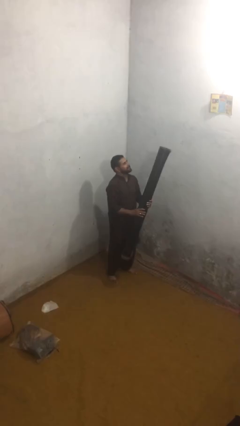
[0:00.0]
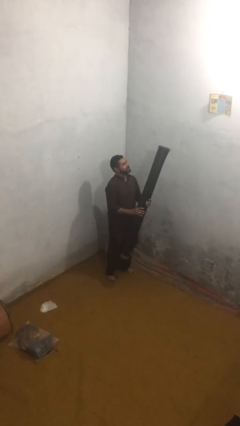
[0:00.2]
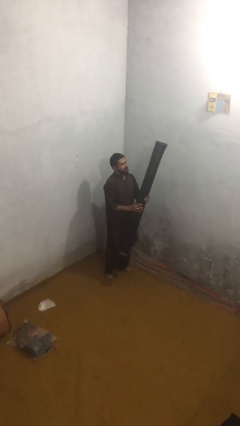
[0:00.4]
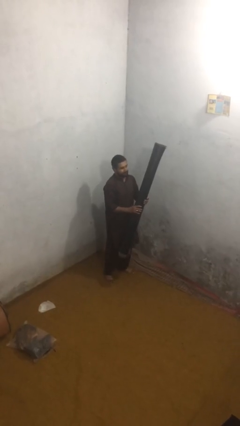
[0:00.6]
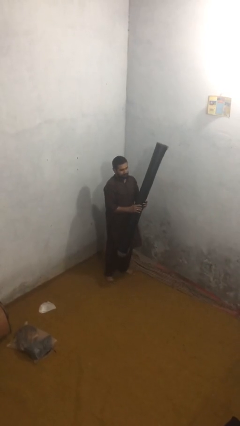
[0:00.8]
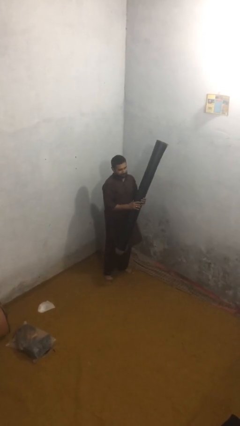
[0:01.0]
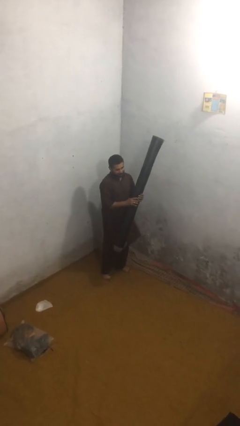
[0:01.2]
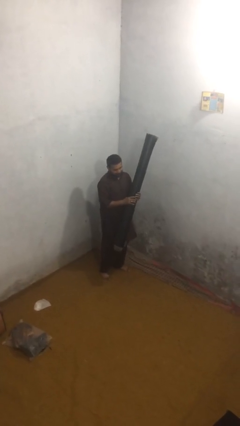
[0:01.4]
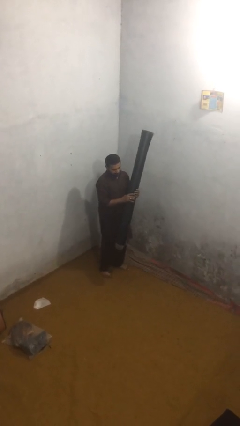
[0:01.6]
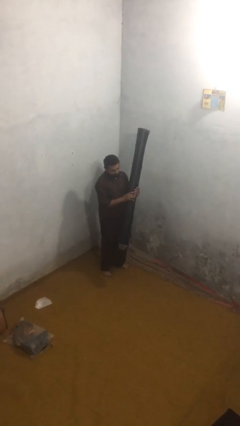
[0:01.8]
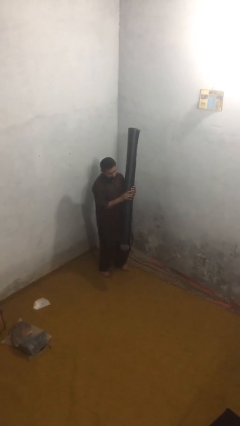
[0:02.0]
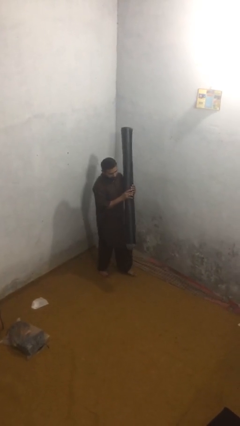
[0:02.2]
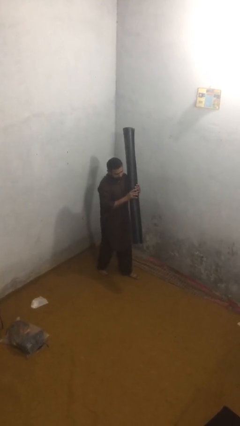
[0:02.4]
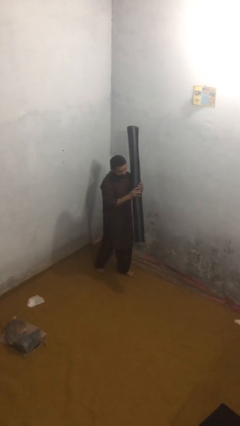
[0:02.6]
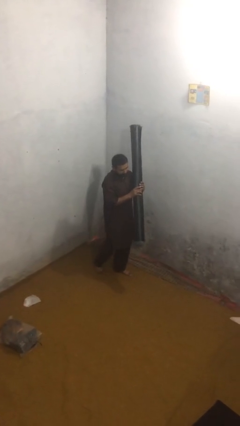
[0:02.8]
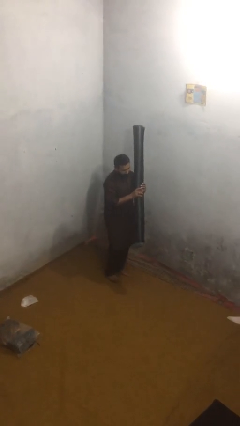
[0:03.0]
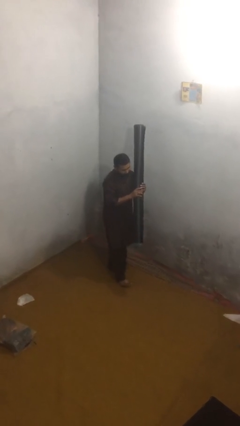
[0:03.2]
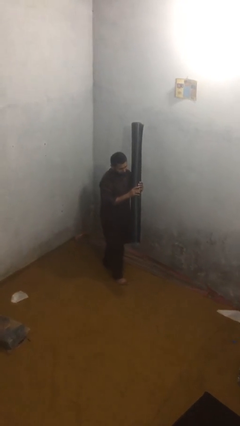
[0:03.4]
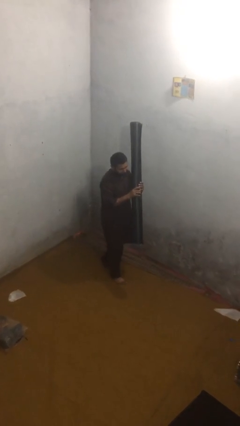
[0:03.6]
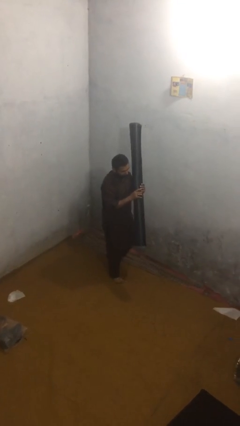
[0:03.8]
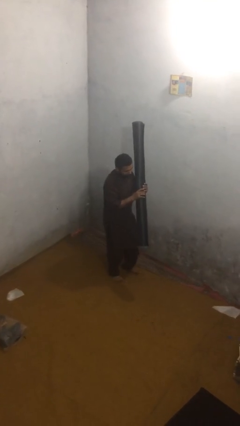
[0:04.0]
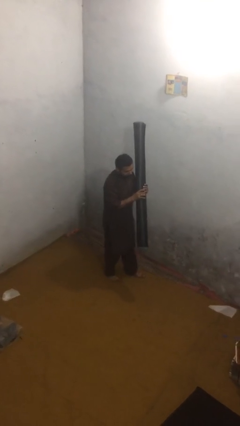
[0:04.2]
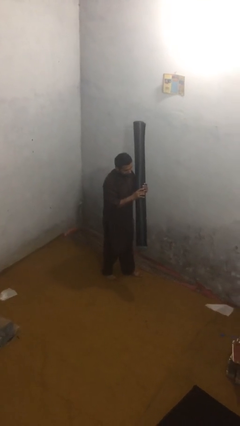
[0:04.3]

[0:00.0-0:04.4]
person carries heavy object

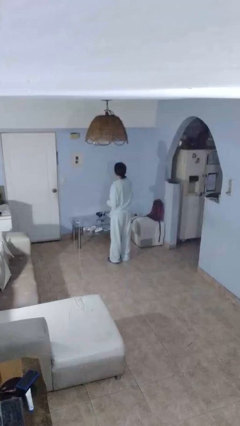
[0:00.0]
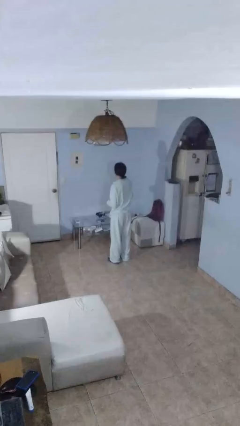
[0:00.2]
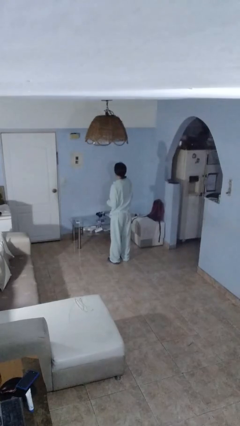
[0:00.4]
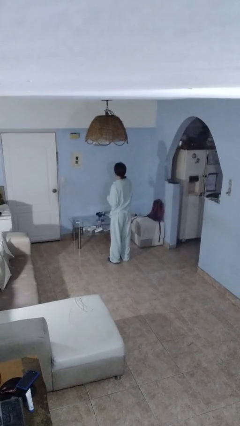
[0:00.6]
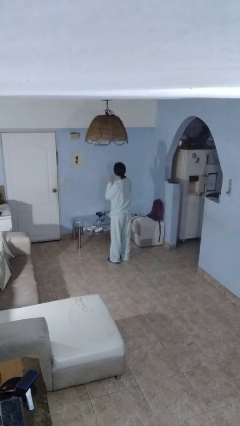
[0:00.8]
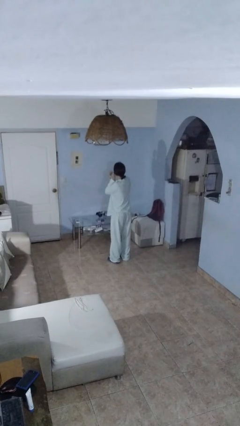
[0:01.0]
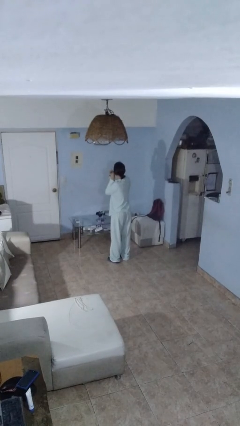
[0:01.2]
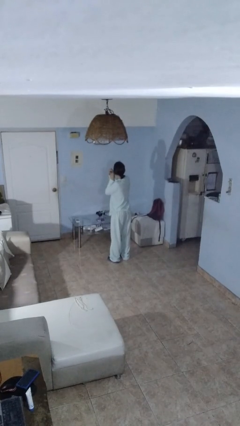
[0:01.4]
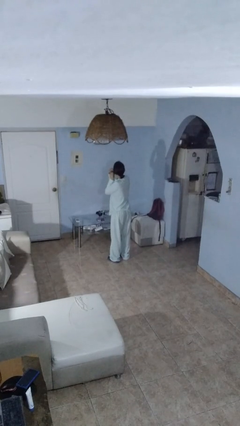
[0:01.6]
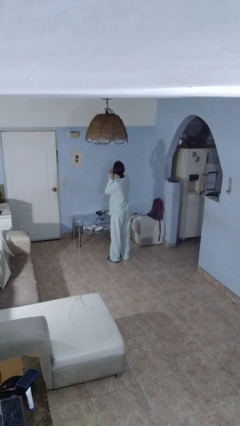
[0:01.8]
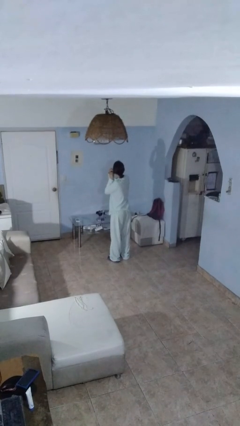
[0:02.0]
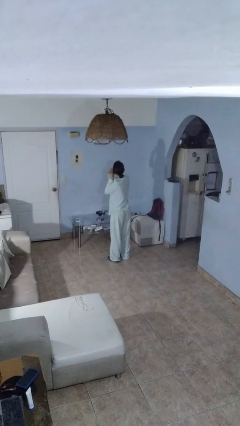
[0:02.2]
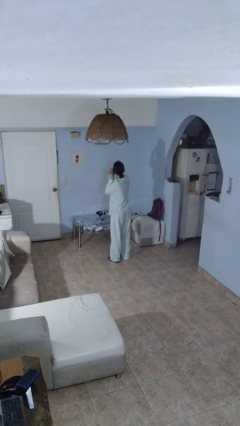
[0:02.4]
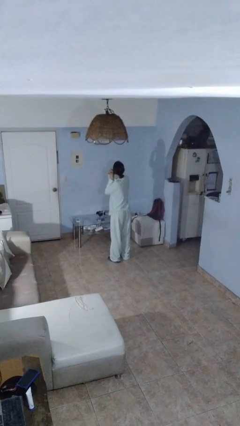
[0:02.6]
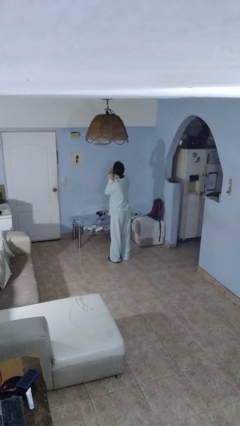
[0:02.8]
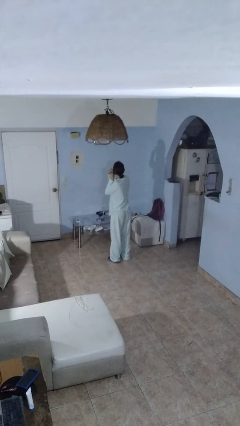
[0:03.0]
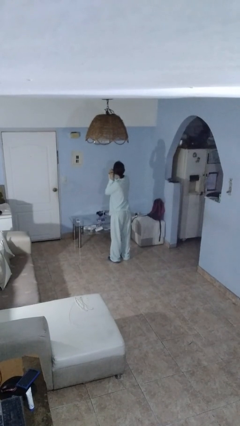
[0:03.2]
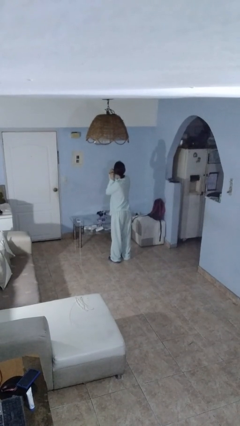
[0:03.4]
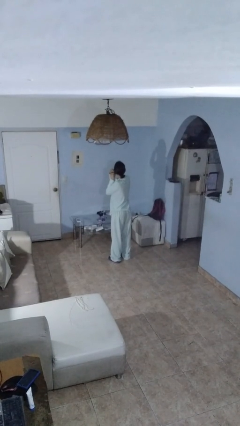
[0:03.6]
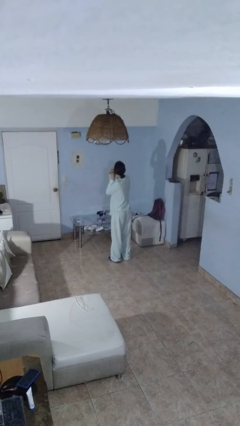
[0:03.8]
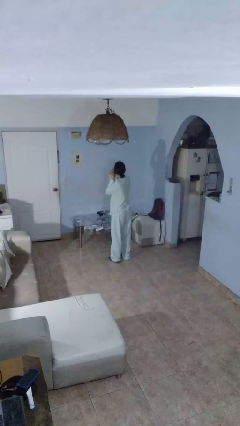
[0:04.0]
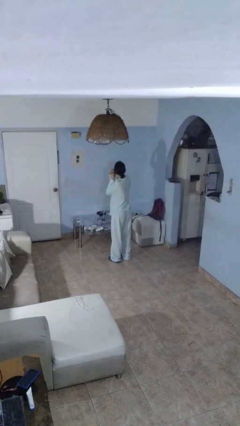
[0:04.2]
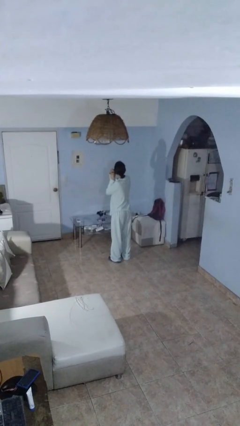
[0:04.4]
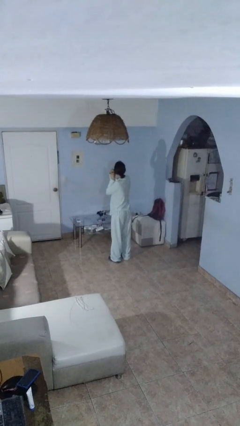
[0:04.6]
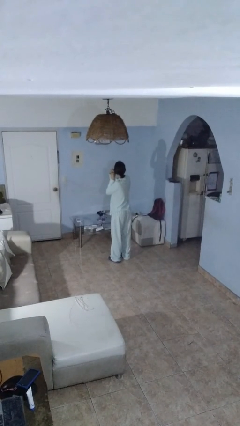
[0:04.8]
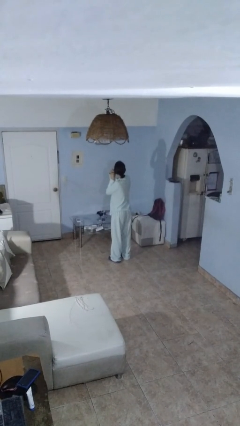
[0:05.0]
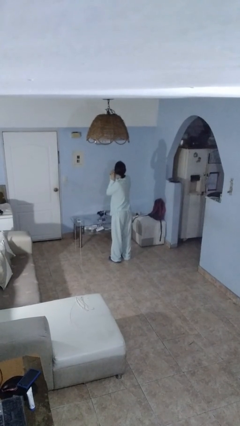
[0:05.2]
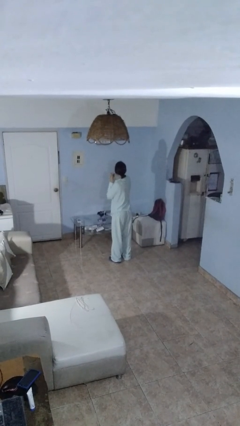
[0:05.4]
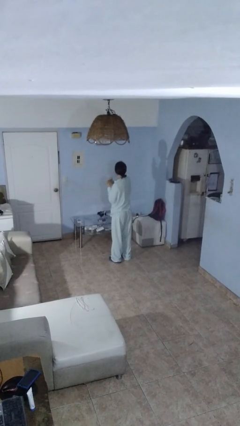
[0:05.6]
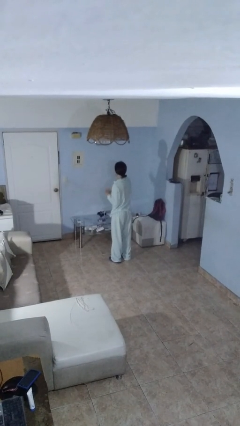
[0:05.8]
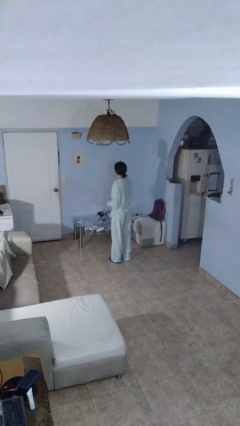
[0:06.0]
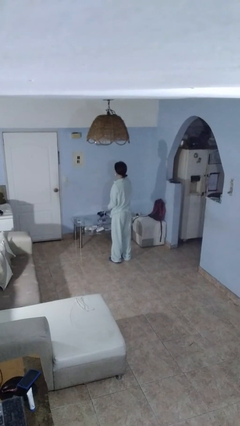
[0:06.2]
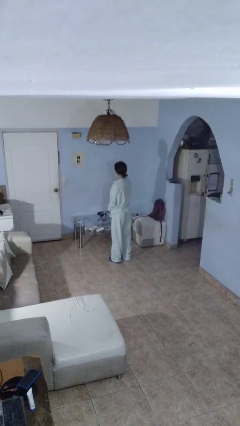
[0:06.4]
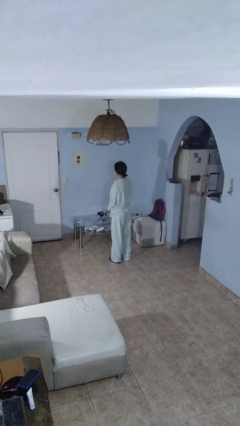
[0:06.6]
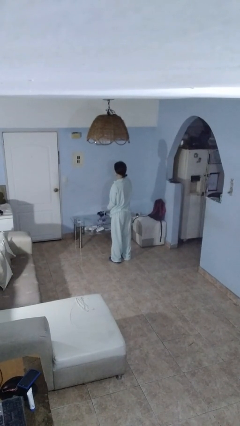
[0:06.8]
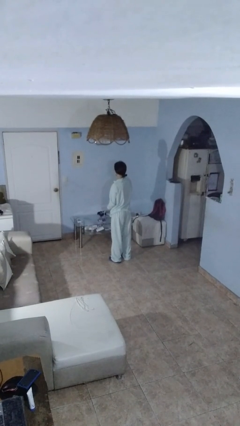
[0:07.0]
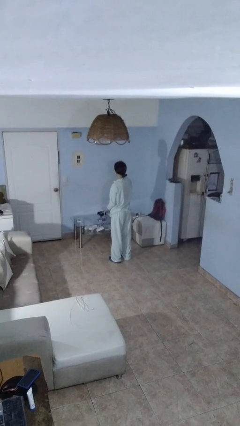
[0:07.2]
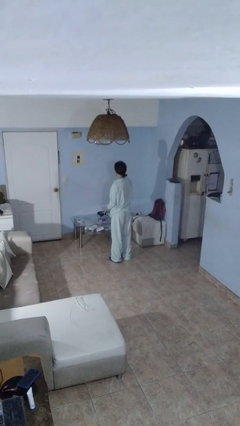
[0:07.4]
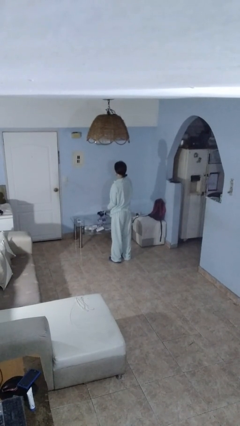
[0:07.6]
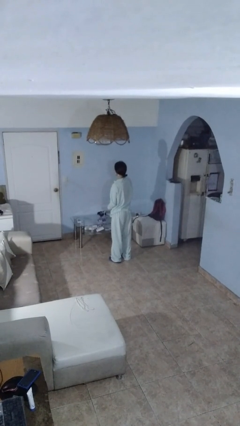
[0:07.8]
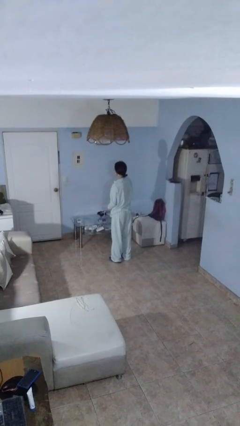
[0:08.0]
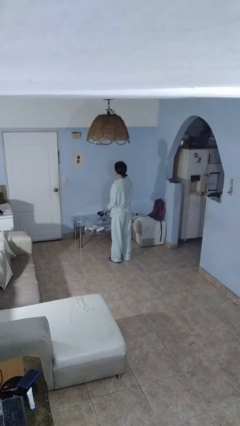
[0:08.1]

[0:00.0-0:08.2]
person puts on earrings

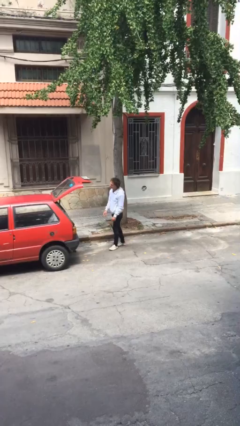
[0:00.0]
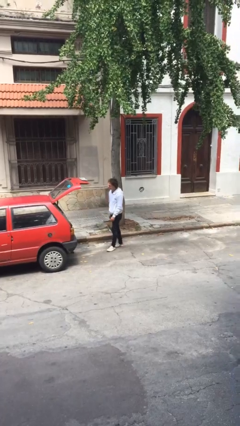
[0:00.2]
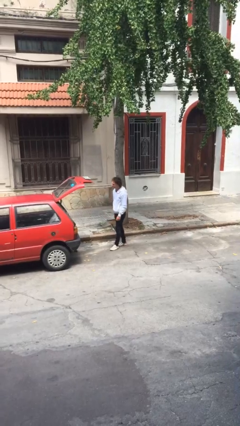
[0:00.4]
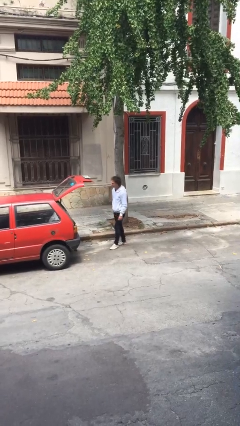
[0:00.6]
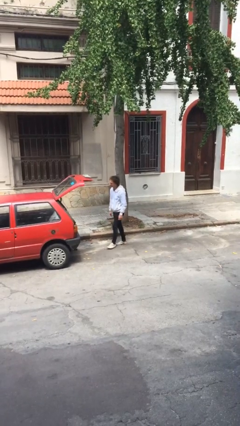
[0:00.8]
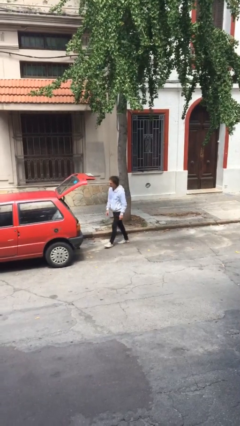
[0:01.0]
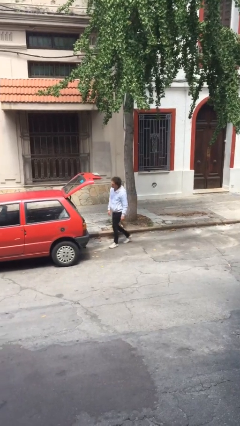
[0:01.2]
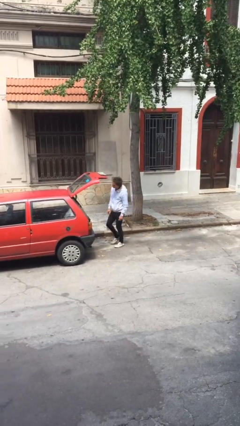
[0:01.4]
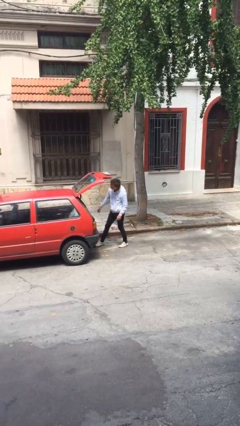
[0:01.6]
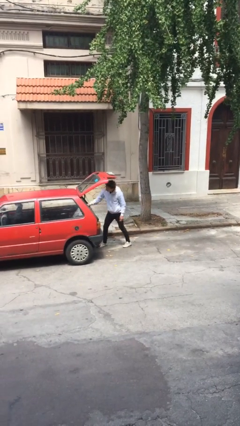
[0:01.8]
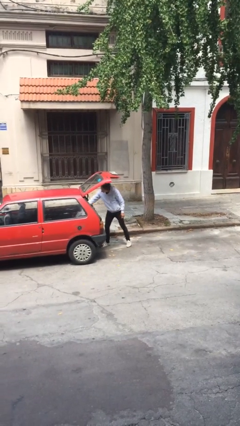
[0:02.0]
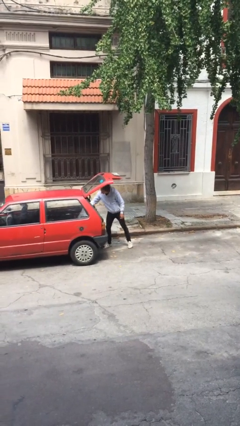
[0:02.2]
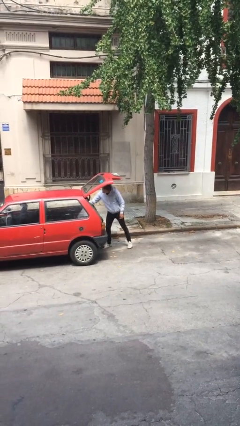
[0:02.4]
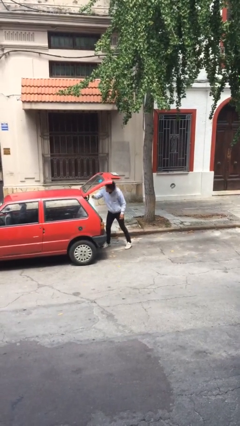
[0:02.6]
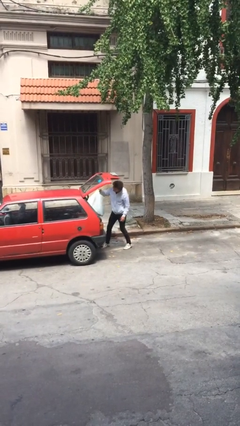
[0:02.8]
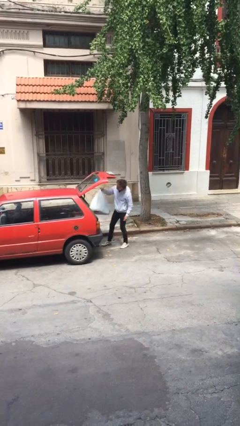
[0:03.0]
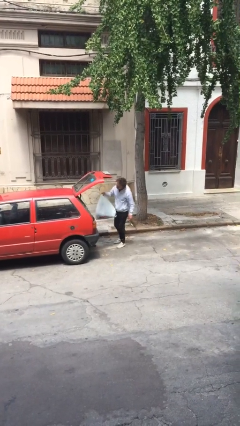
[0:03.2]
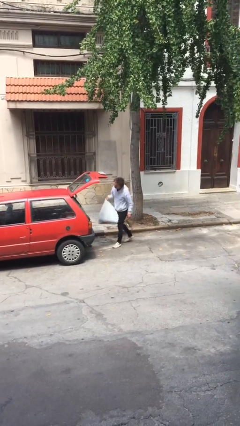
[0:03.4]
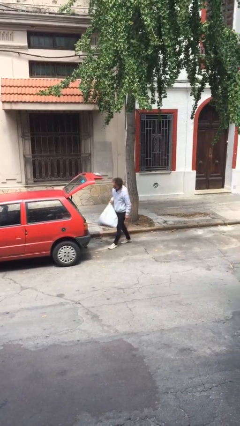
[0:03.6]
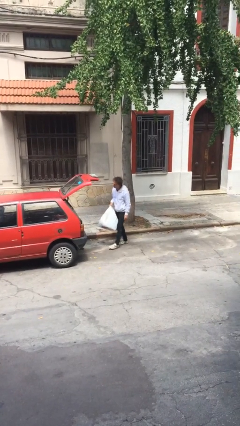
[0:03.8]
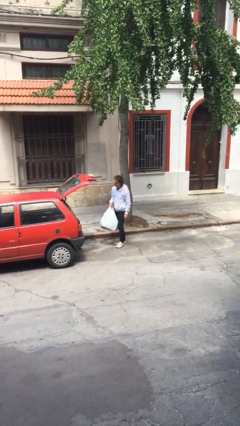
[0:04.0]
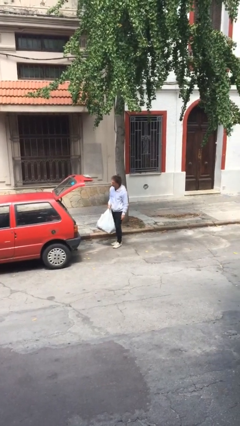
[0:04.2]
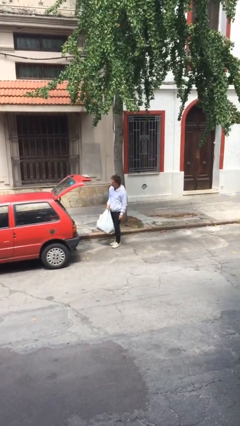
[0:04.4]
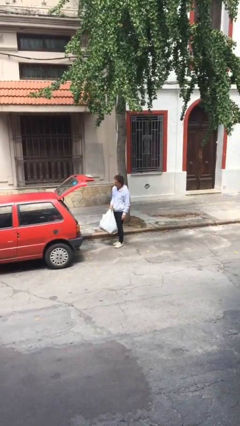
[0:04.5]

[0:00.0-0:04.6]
person unloads car

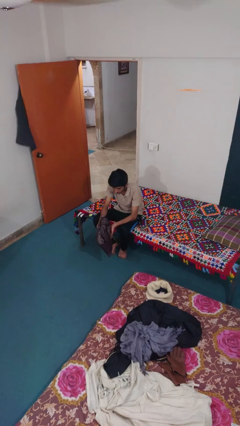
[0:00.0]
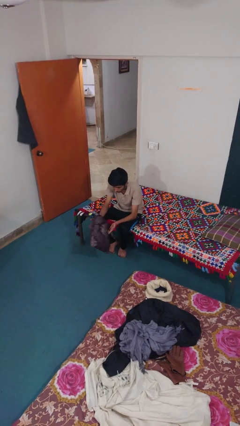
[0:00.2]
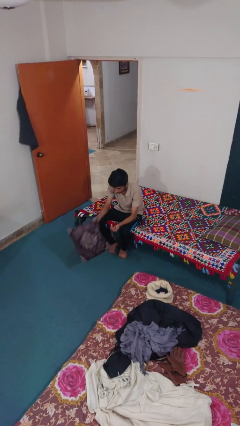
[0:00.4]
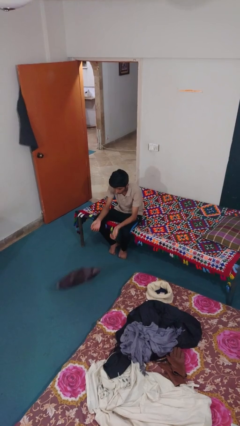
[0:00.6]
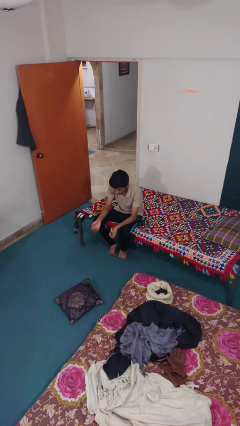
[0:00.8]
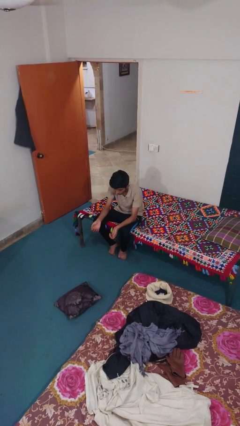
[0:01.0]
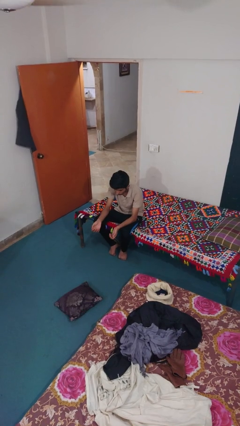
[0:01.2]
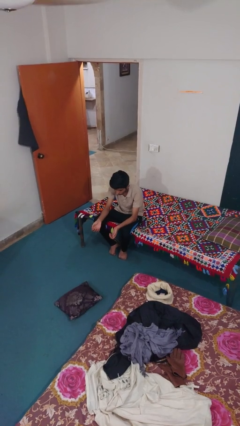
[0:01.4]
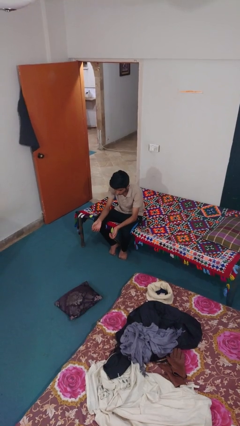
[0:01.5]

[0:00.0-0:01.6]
person drops object
